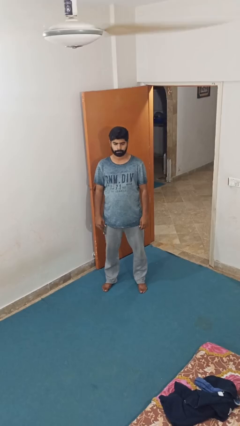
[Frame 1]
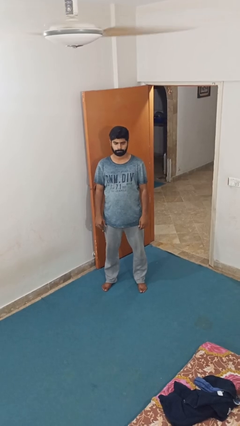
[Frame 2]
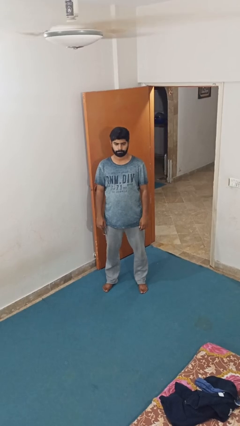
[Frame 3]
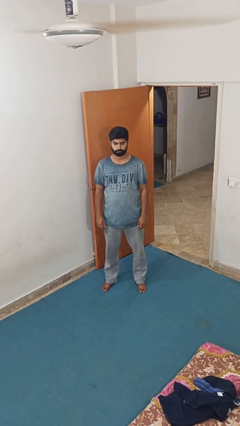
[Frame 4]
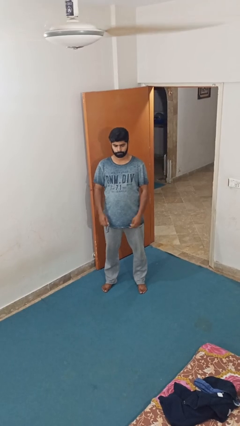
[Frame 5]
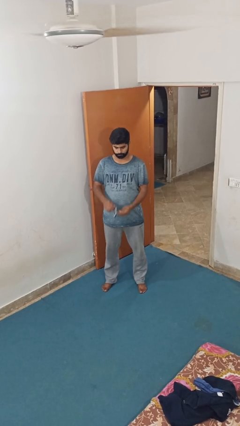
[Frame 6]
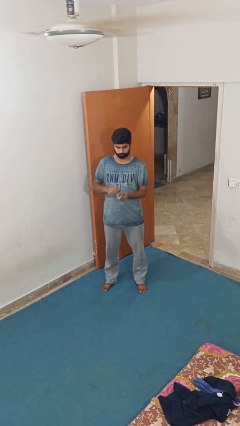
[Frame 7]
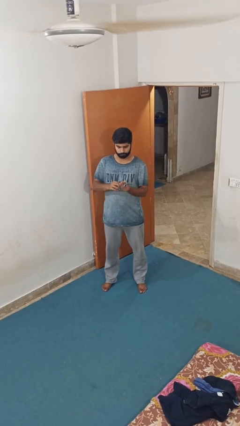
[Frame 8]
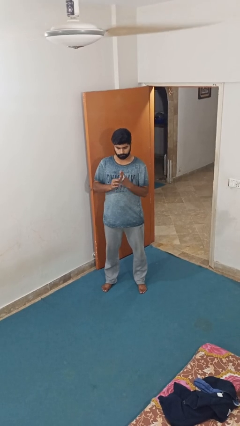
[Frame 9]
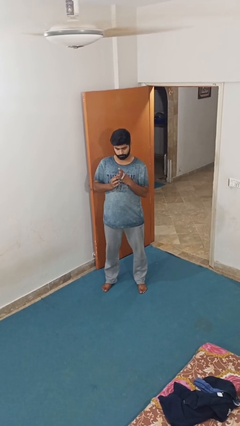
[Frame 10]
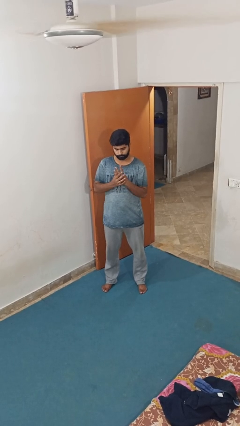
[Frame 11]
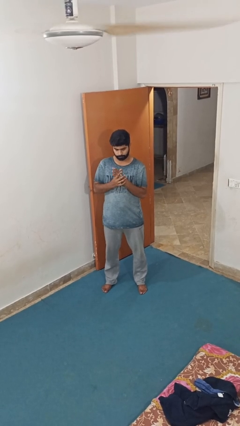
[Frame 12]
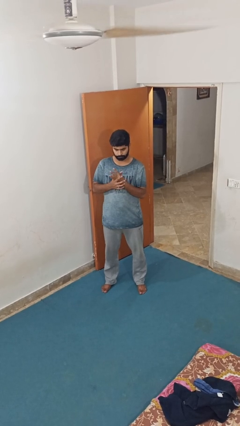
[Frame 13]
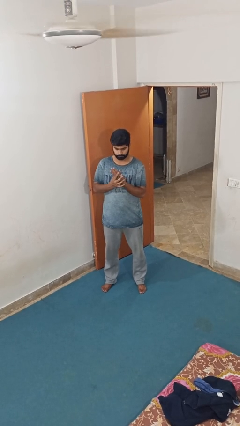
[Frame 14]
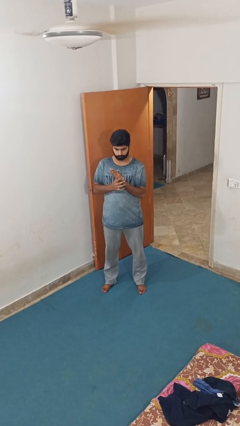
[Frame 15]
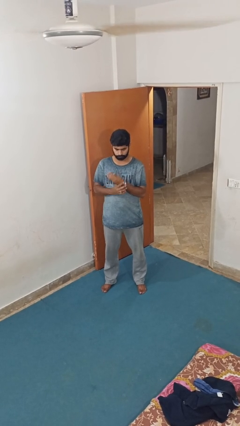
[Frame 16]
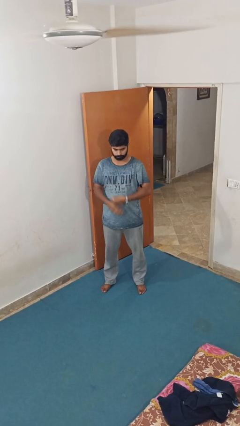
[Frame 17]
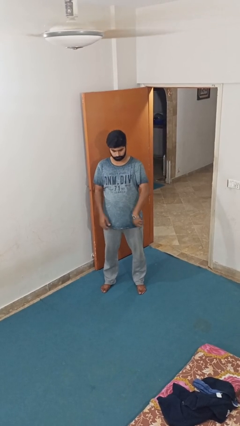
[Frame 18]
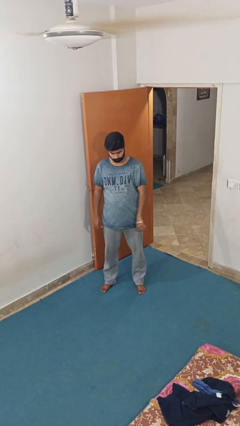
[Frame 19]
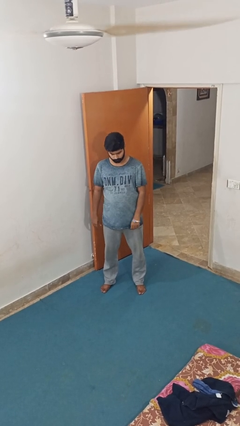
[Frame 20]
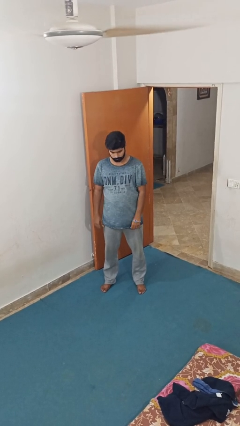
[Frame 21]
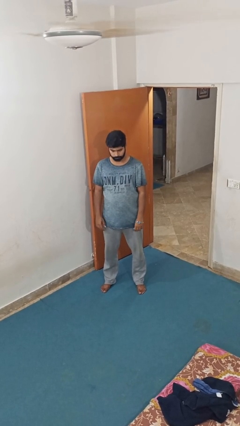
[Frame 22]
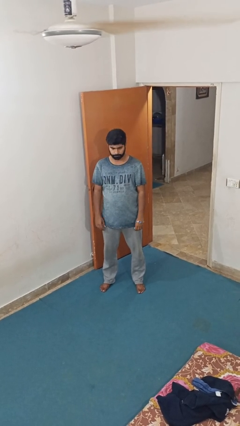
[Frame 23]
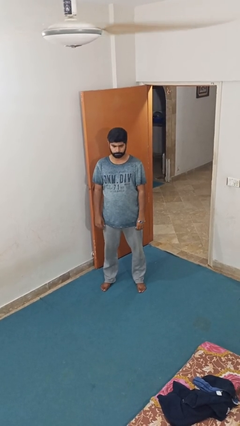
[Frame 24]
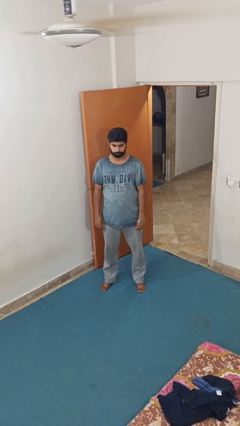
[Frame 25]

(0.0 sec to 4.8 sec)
person puts on wristwatch

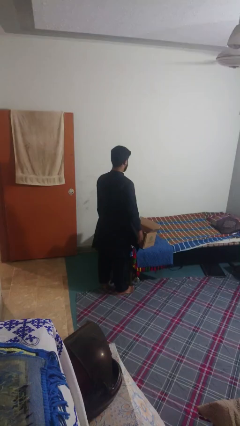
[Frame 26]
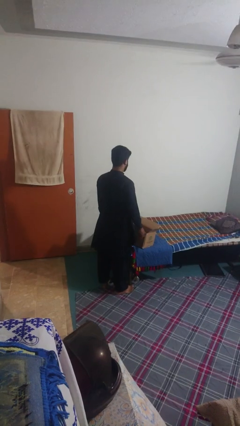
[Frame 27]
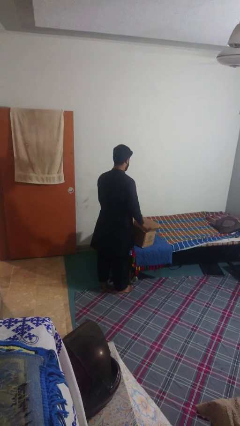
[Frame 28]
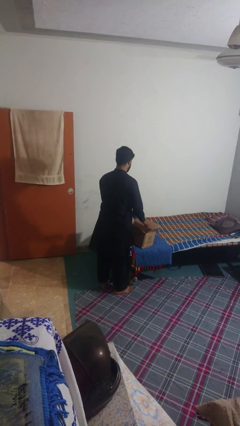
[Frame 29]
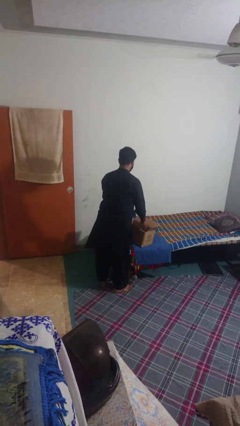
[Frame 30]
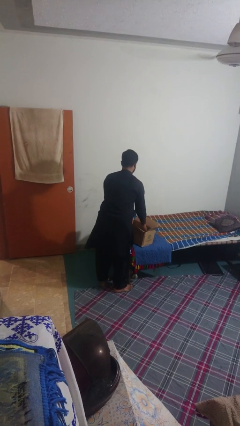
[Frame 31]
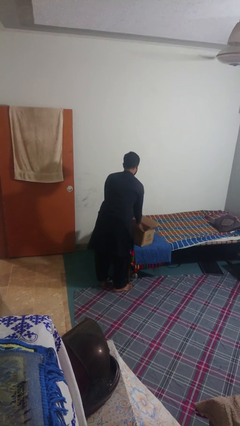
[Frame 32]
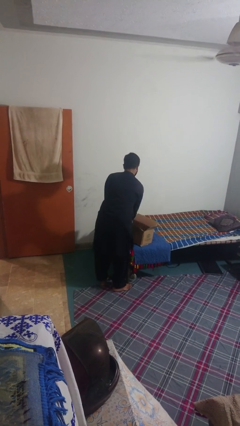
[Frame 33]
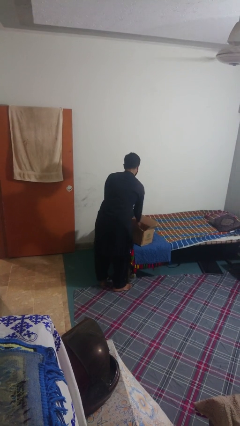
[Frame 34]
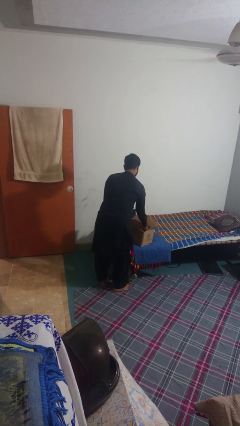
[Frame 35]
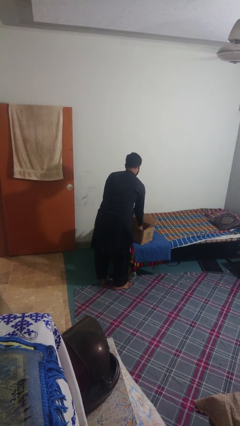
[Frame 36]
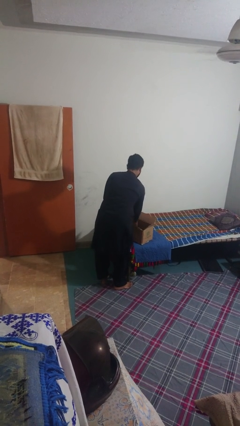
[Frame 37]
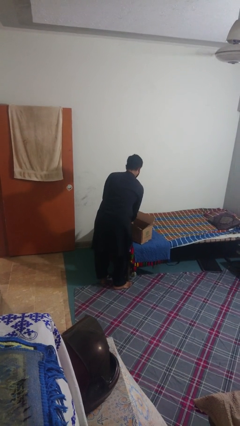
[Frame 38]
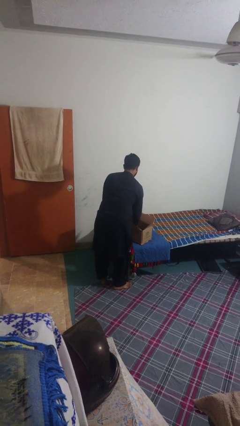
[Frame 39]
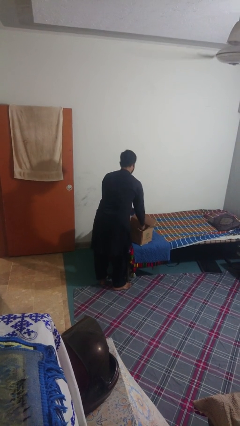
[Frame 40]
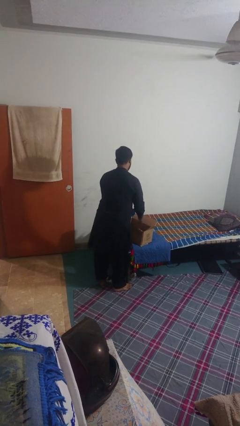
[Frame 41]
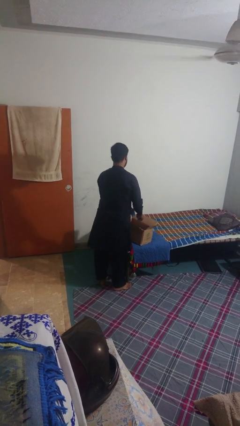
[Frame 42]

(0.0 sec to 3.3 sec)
person searches in box

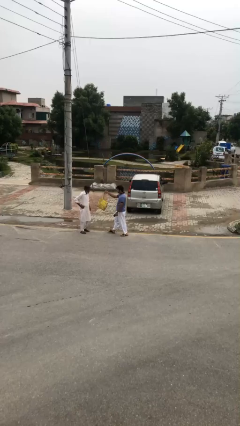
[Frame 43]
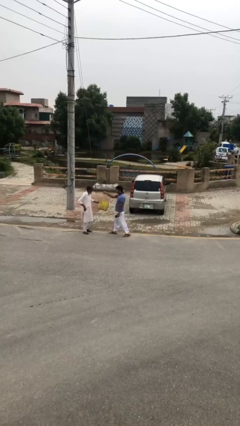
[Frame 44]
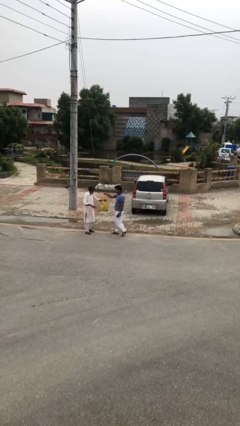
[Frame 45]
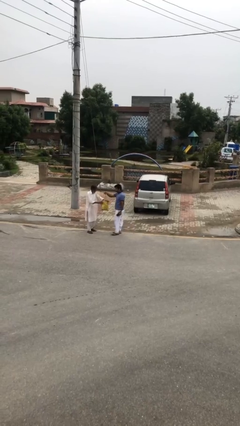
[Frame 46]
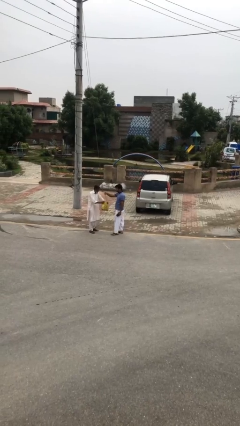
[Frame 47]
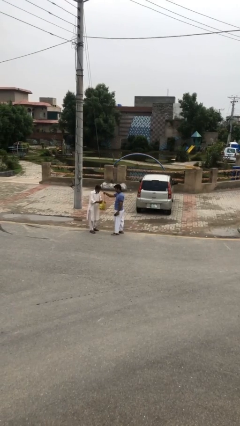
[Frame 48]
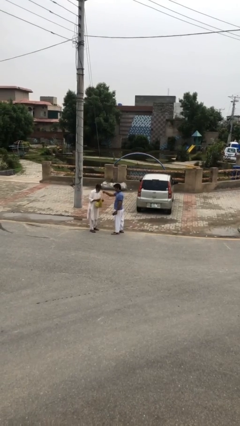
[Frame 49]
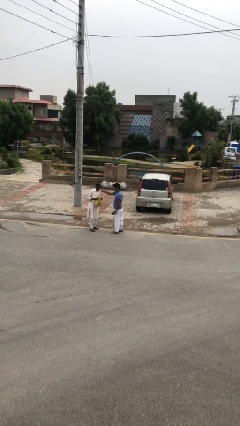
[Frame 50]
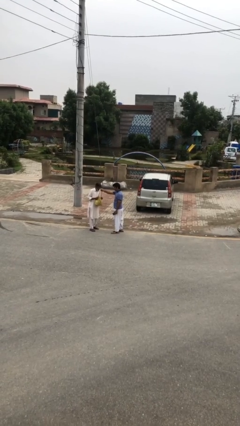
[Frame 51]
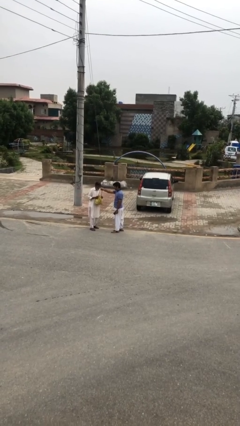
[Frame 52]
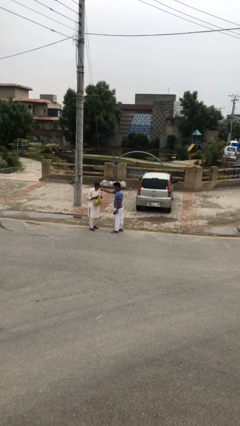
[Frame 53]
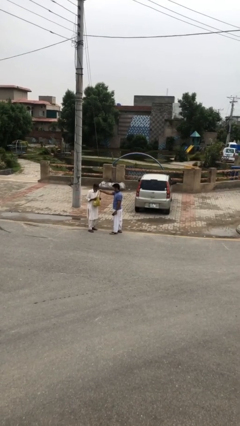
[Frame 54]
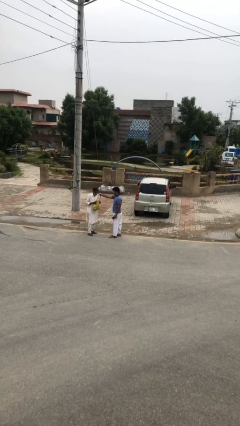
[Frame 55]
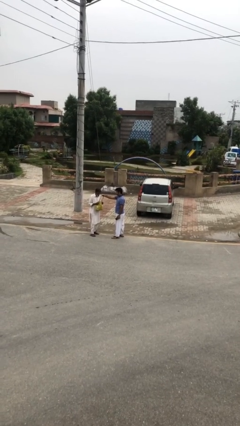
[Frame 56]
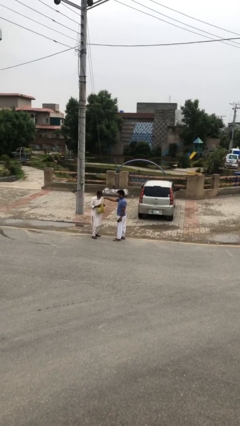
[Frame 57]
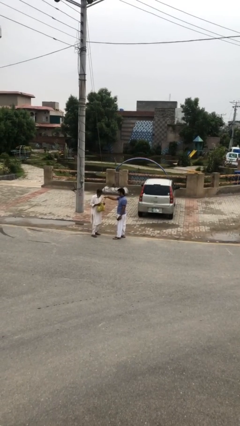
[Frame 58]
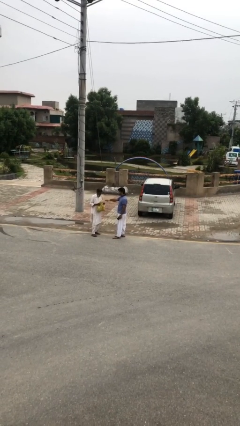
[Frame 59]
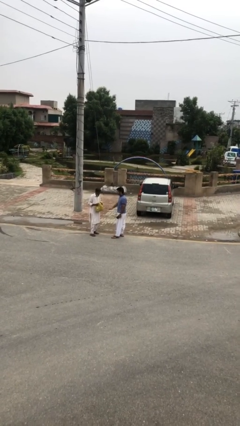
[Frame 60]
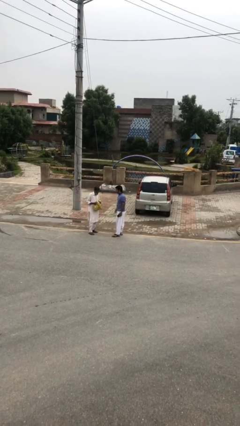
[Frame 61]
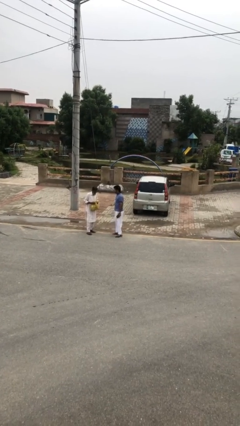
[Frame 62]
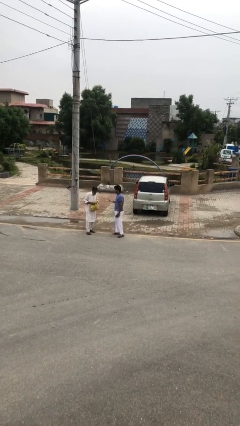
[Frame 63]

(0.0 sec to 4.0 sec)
person transfers object to person

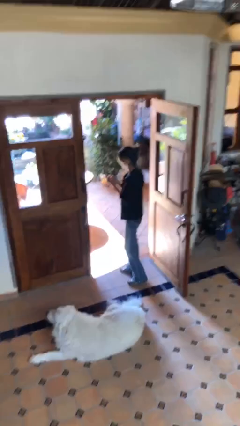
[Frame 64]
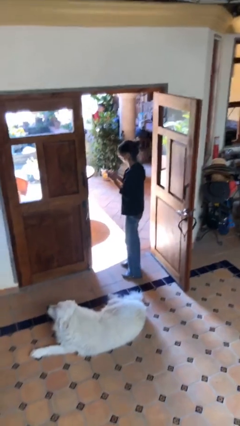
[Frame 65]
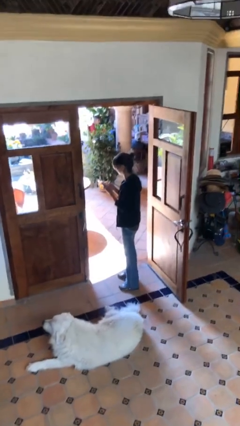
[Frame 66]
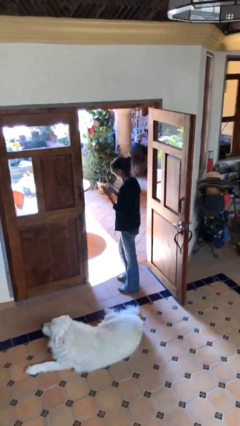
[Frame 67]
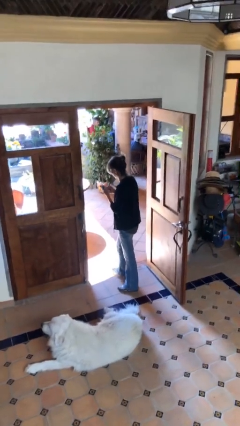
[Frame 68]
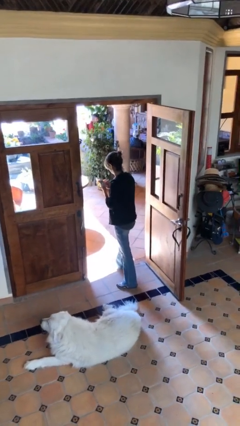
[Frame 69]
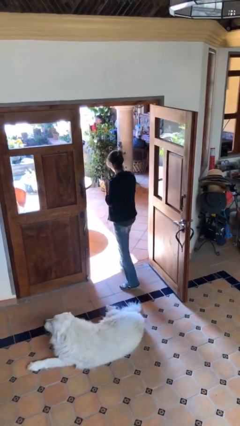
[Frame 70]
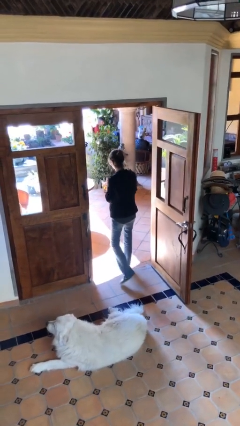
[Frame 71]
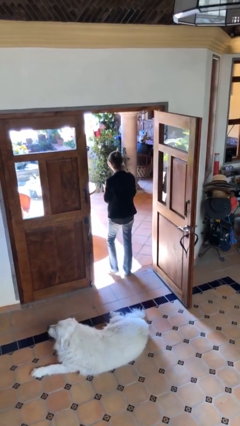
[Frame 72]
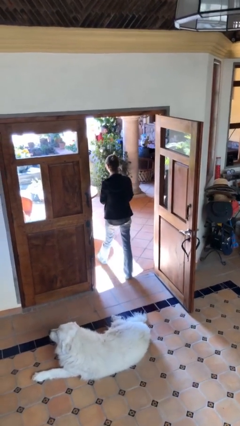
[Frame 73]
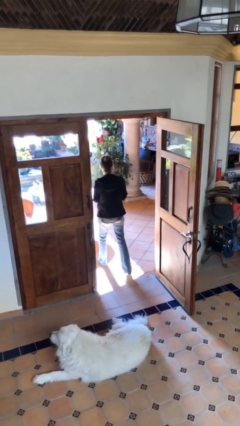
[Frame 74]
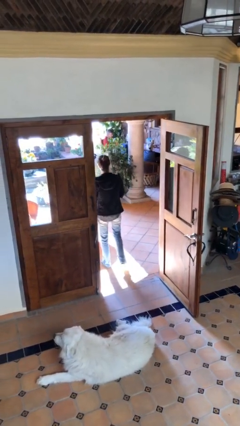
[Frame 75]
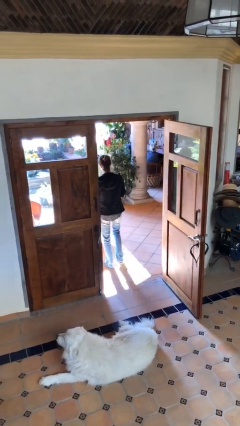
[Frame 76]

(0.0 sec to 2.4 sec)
person exits scene through structure

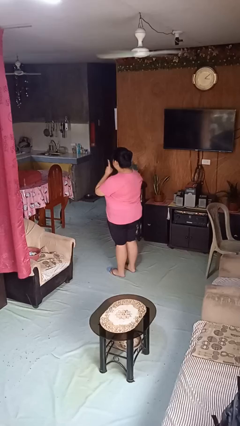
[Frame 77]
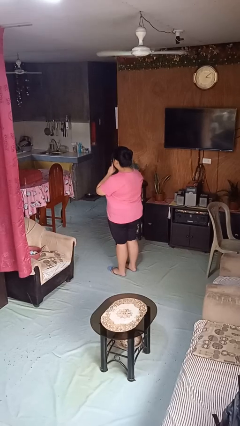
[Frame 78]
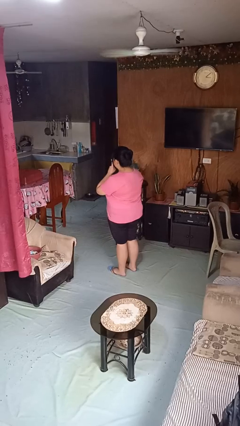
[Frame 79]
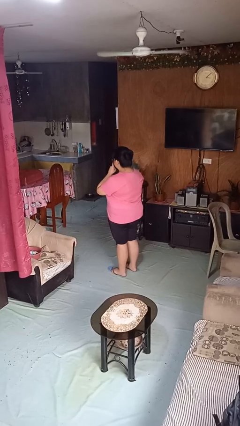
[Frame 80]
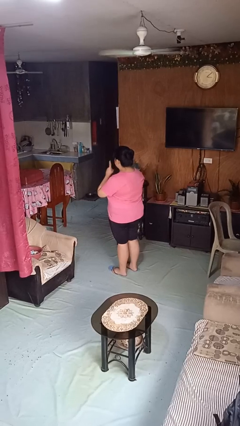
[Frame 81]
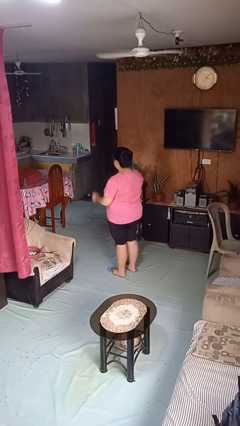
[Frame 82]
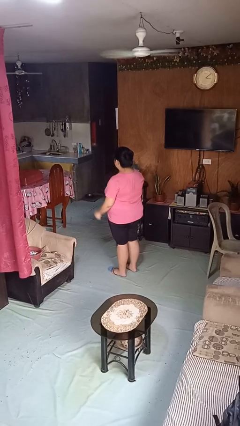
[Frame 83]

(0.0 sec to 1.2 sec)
person gestures be quiet

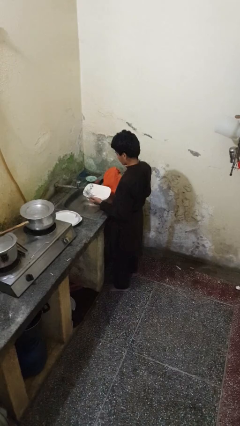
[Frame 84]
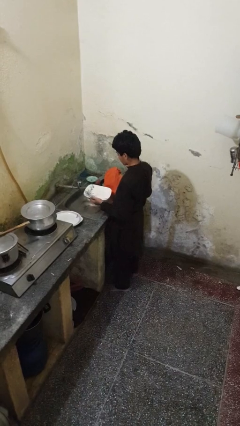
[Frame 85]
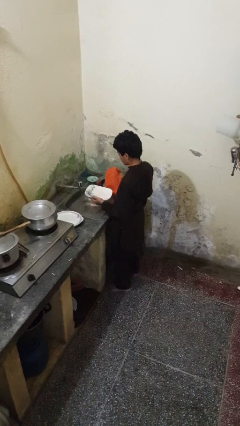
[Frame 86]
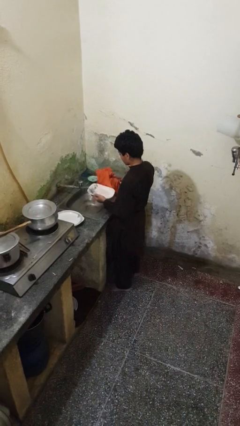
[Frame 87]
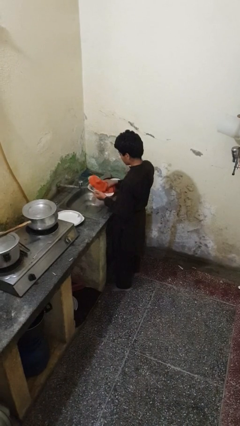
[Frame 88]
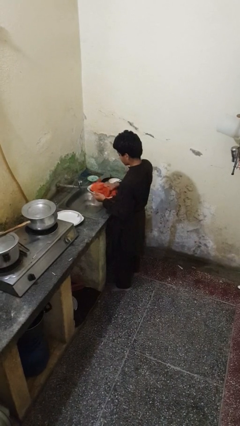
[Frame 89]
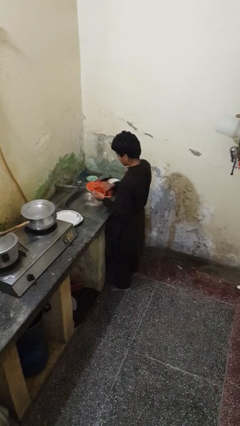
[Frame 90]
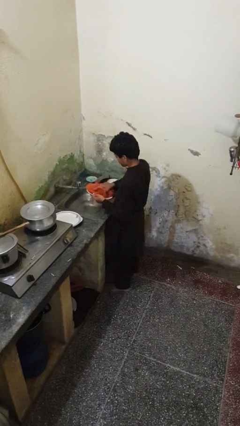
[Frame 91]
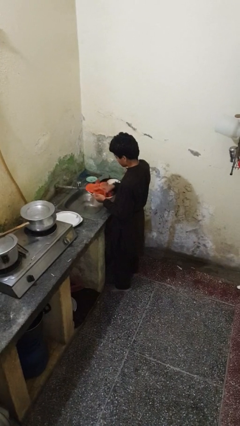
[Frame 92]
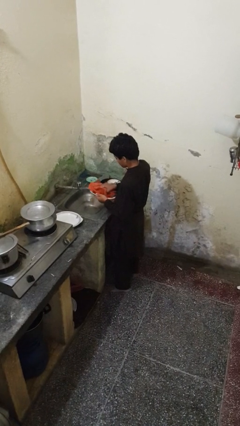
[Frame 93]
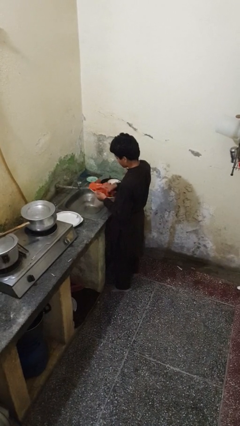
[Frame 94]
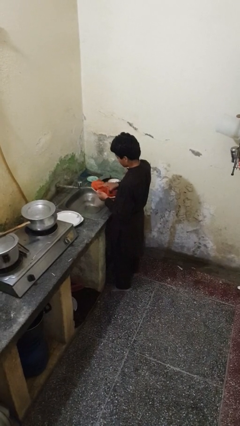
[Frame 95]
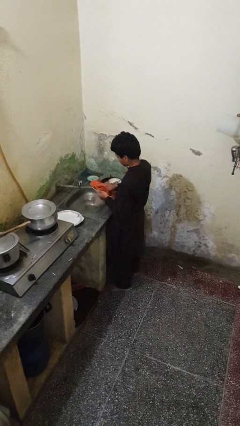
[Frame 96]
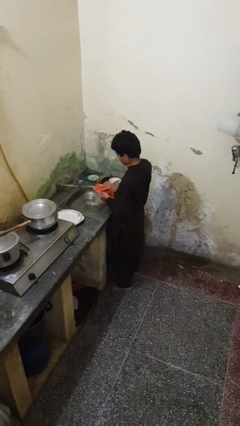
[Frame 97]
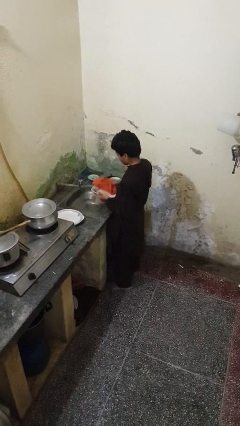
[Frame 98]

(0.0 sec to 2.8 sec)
person dries dish
